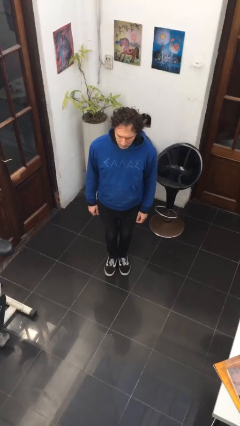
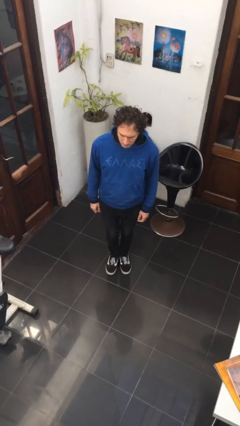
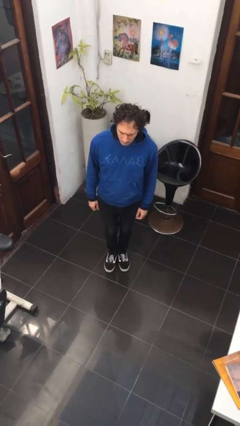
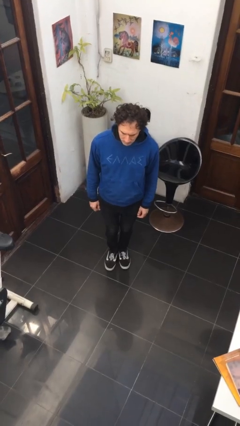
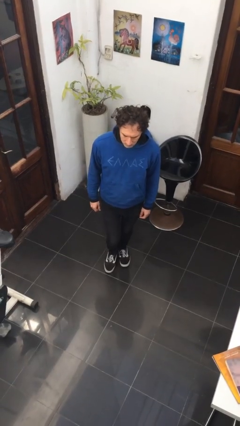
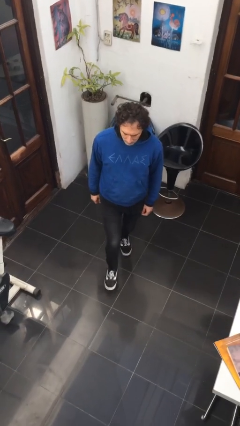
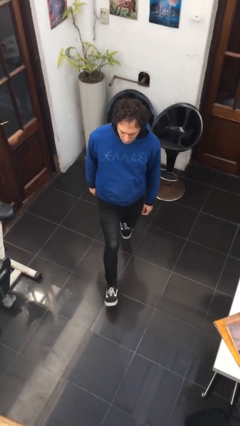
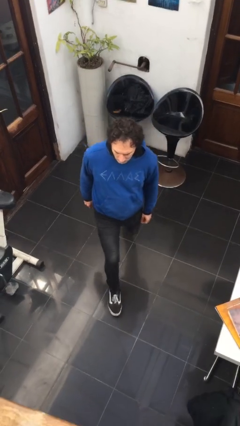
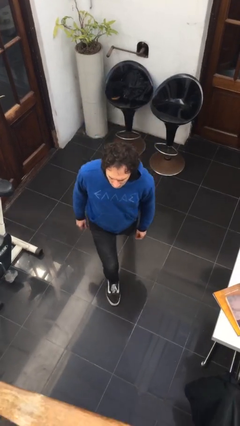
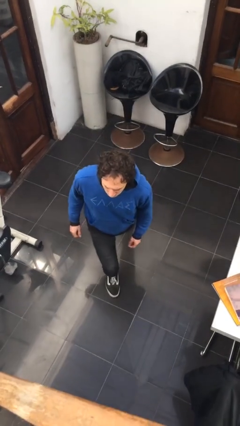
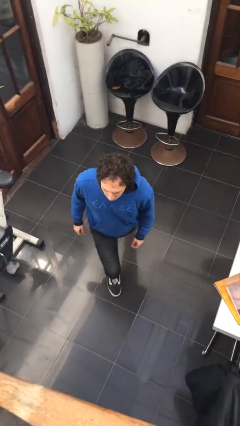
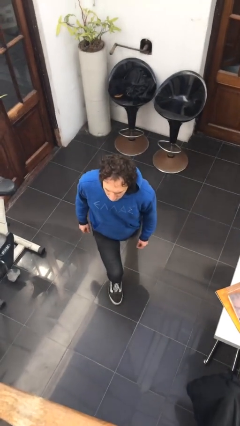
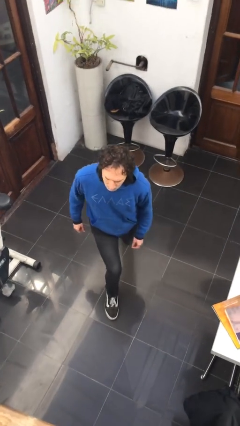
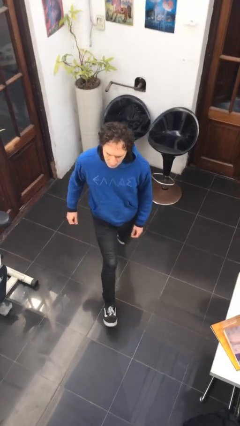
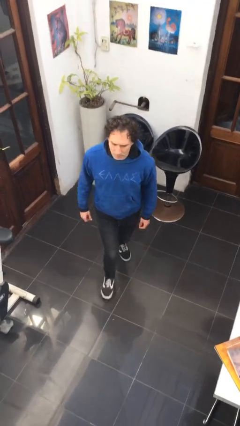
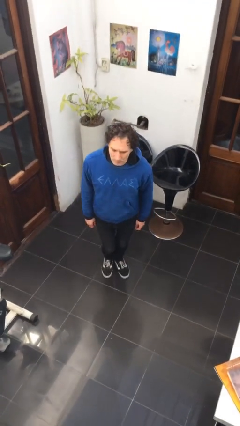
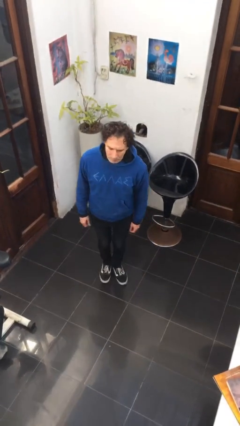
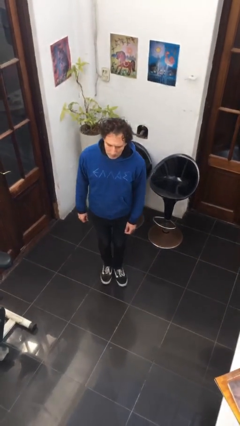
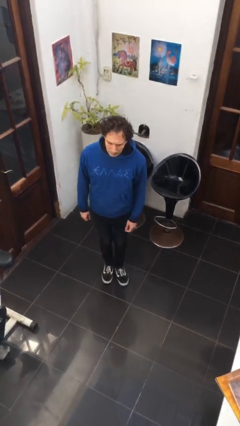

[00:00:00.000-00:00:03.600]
person exercises with lunges

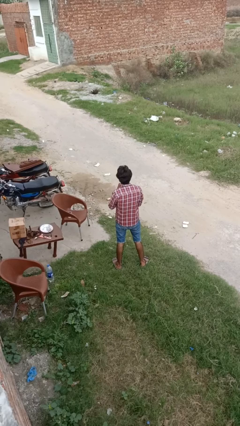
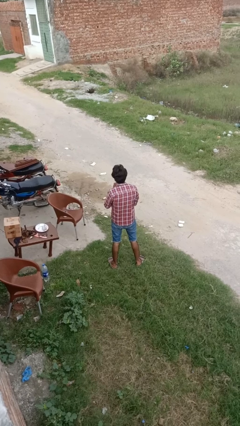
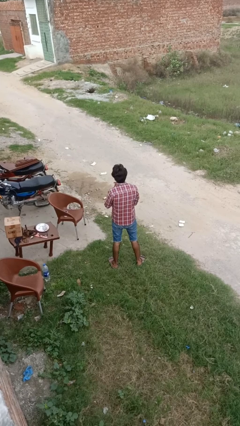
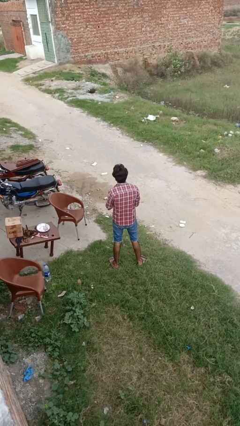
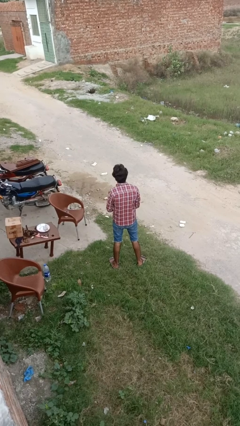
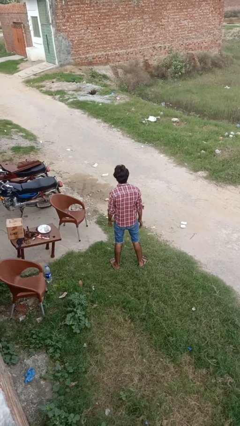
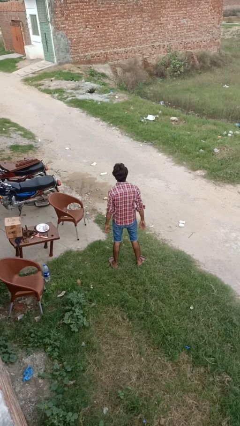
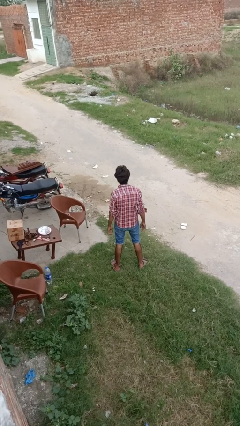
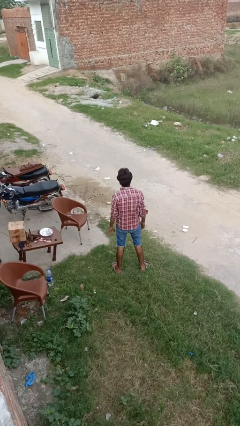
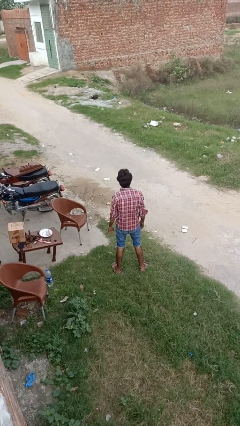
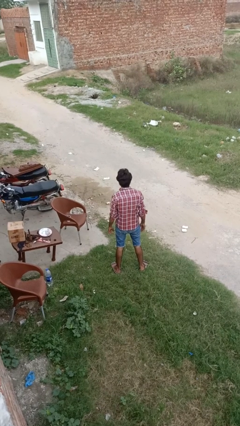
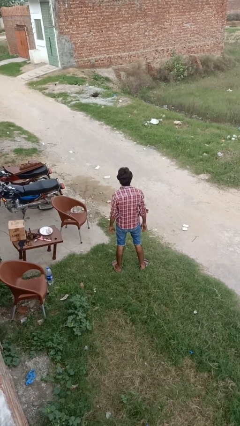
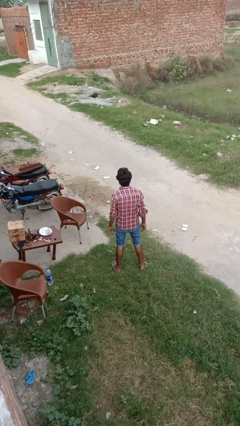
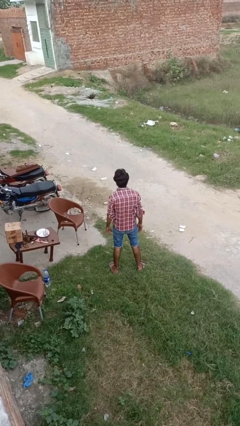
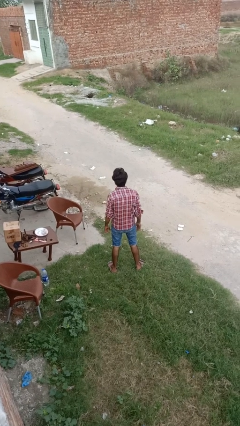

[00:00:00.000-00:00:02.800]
person takes off ring

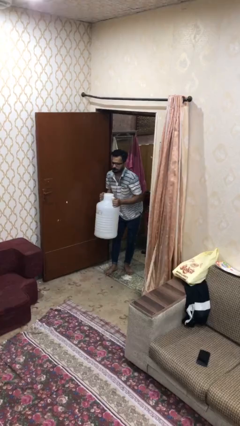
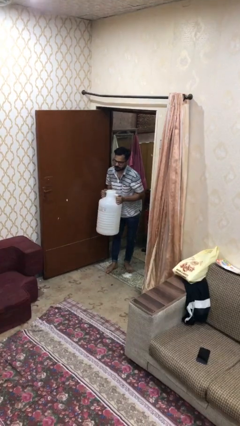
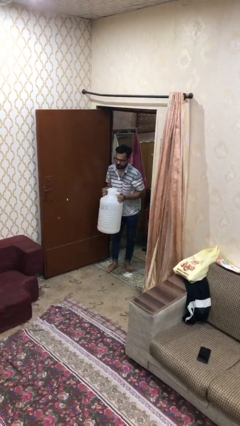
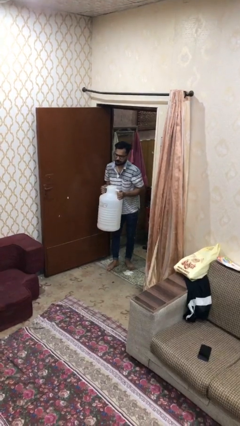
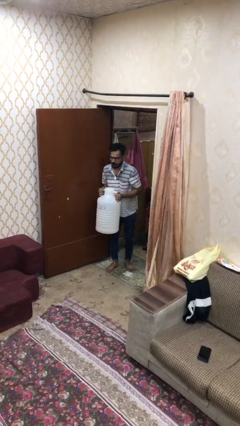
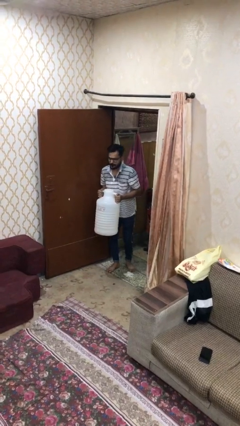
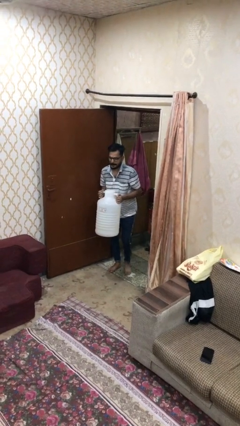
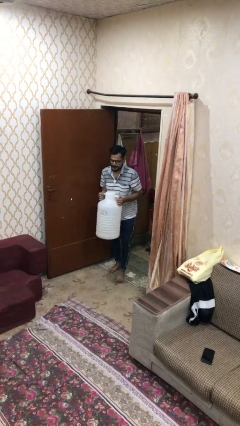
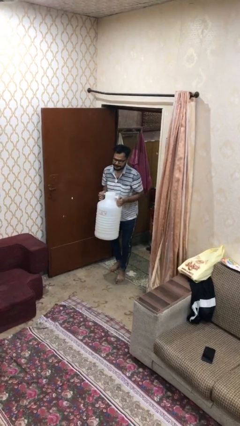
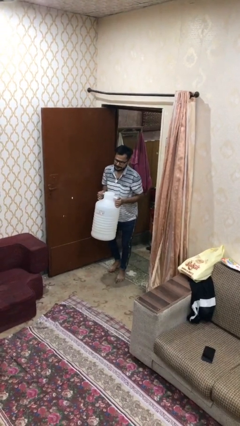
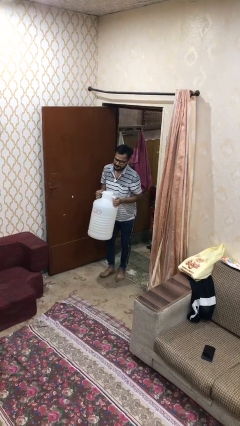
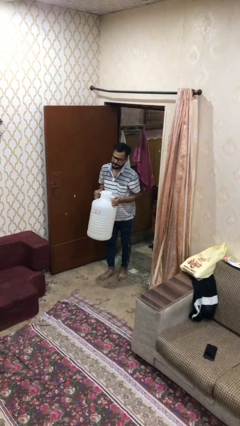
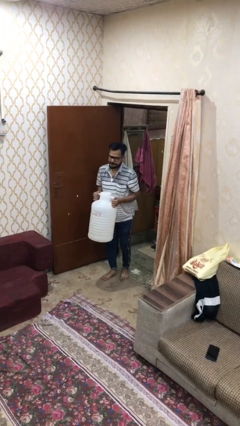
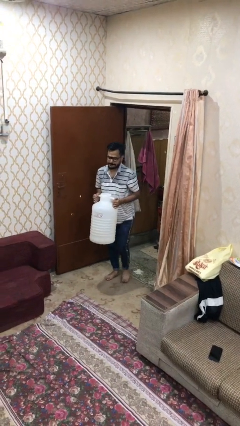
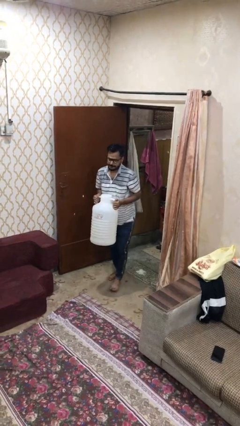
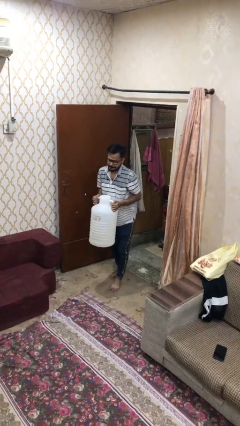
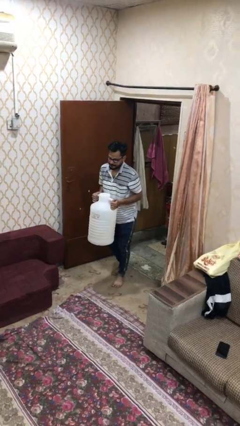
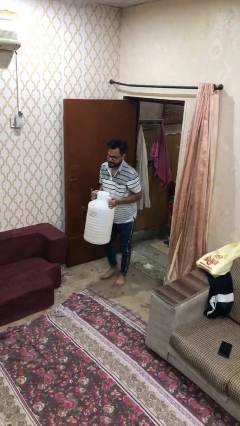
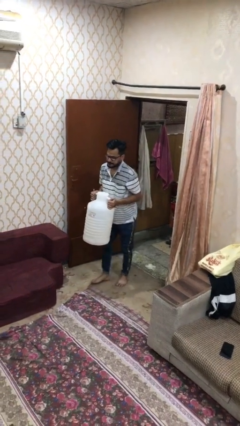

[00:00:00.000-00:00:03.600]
person carries heavy object

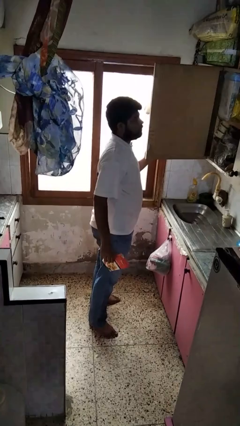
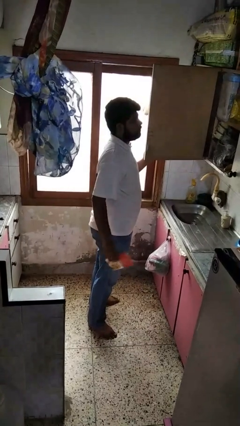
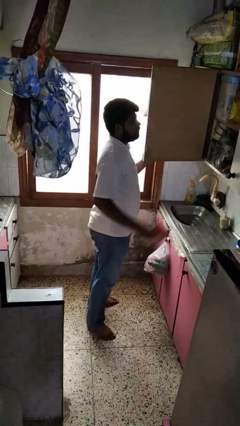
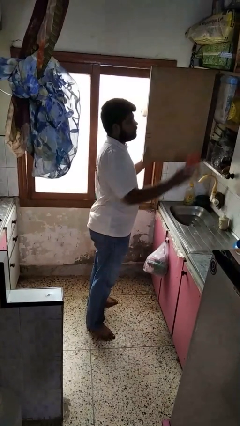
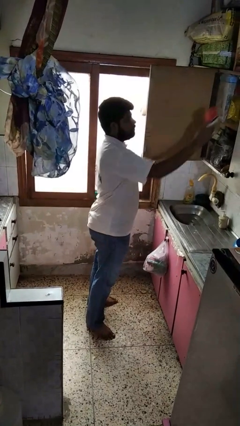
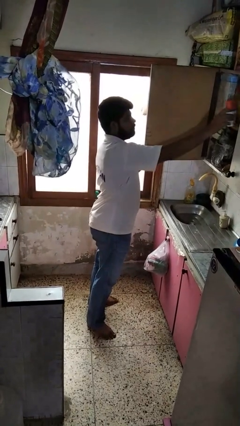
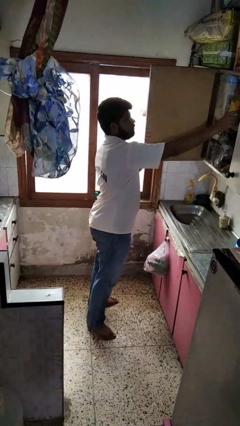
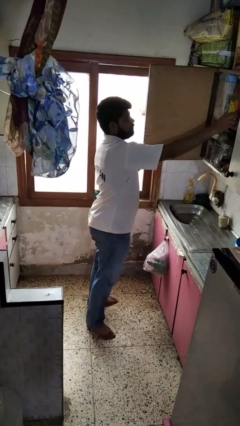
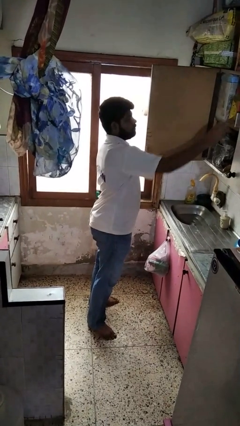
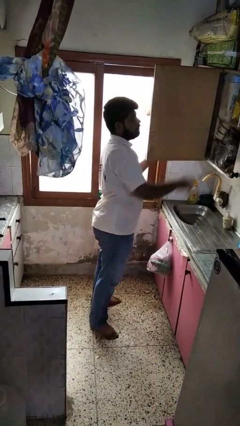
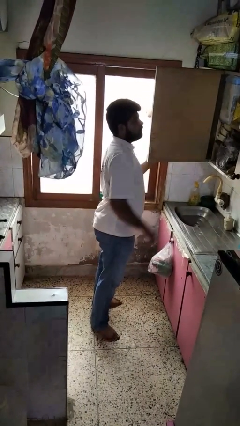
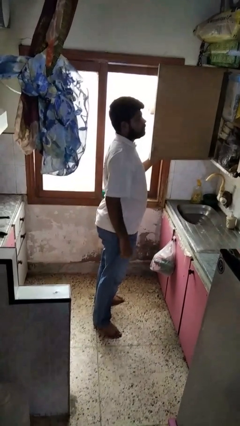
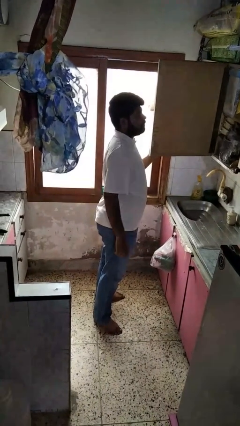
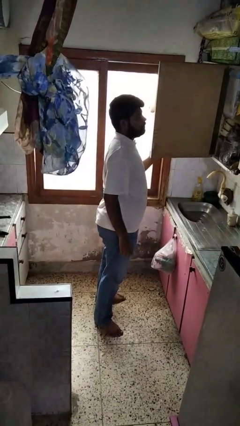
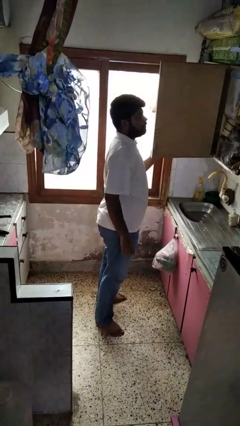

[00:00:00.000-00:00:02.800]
person puts down object into cabinet

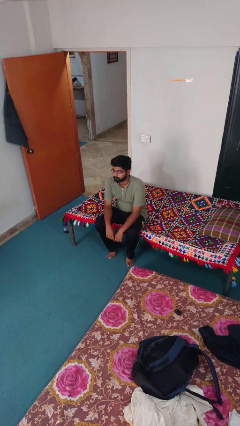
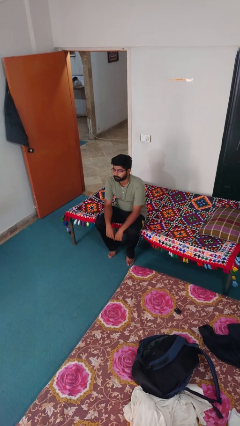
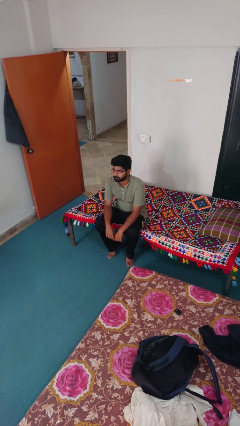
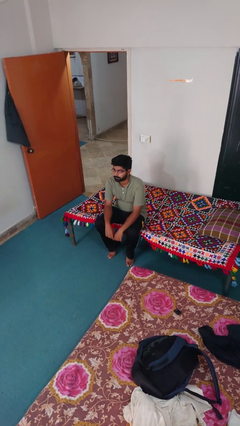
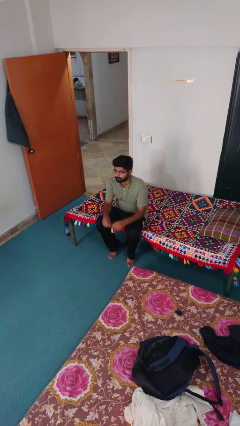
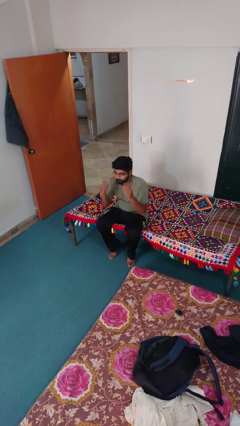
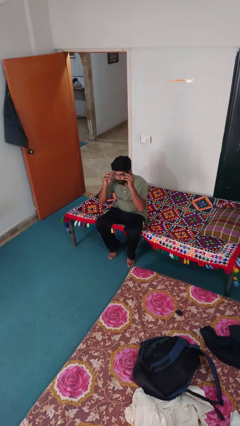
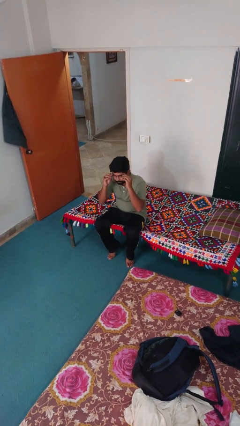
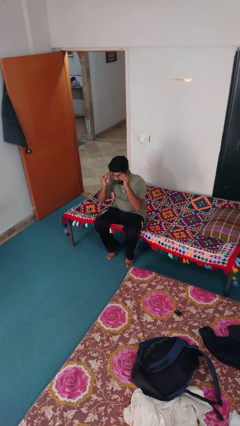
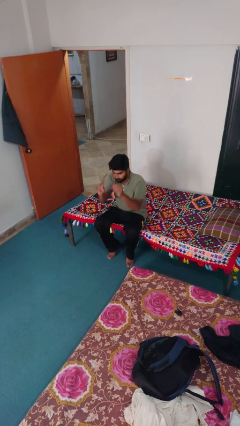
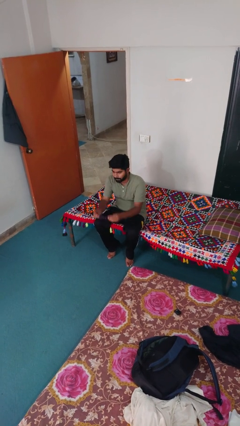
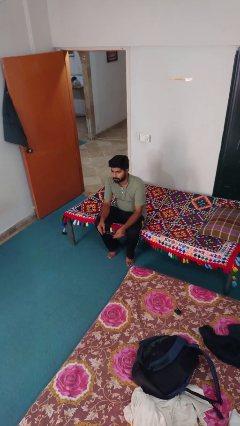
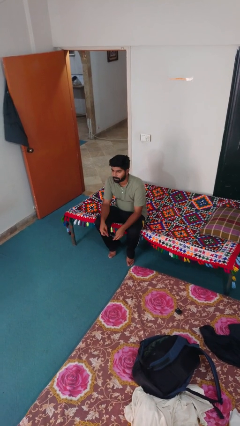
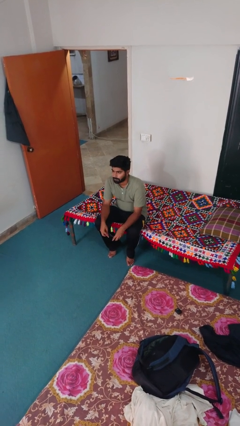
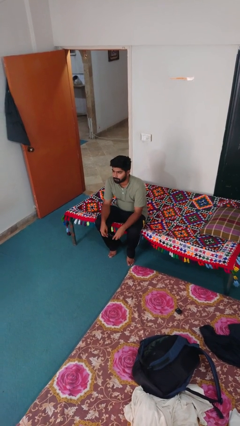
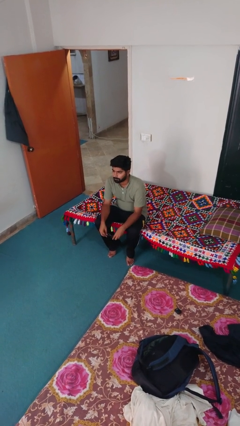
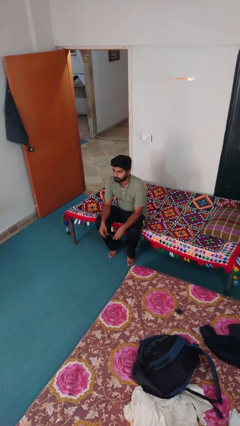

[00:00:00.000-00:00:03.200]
person takes off glasses

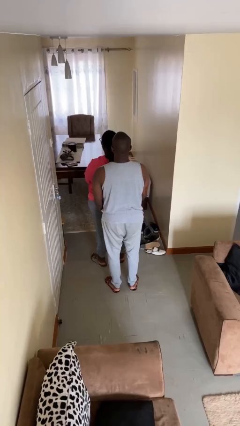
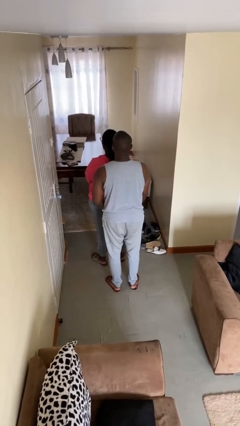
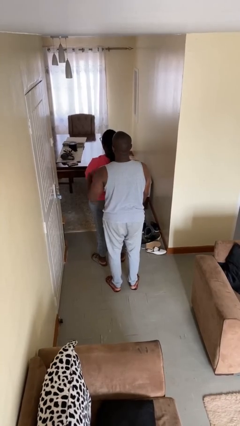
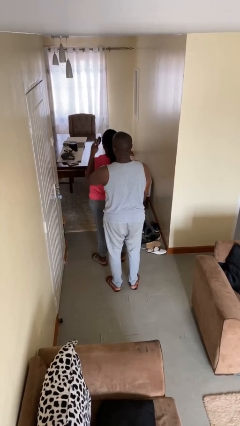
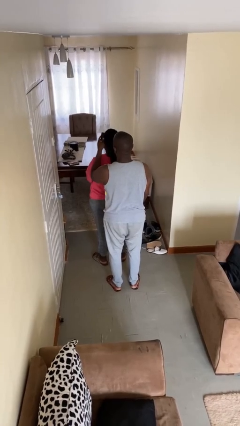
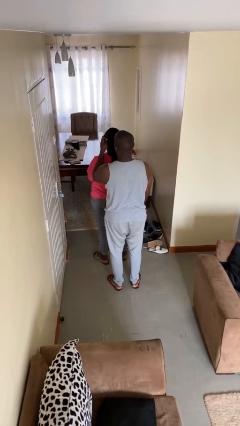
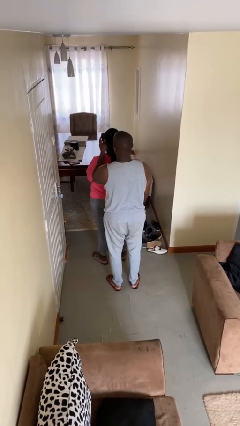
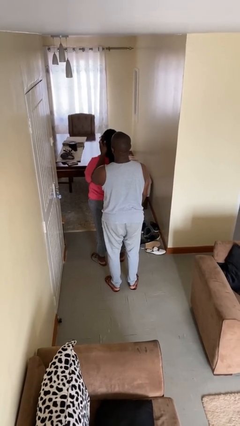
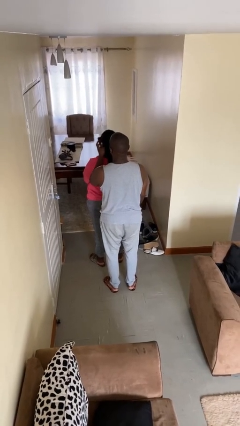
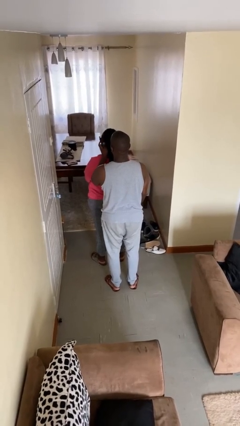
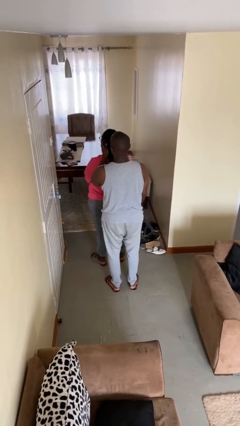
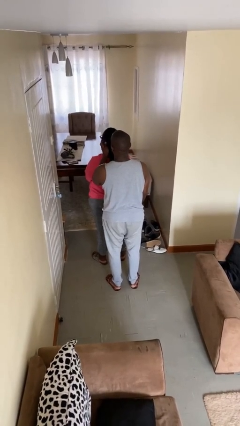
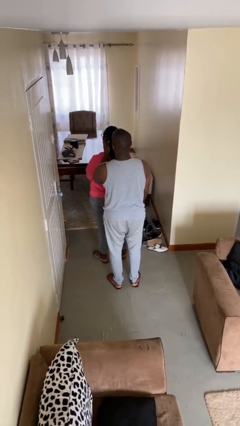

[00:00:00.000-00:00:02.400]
person brushes hair of person
